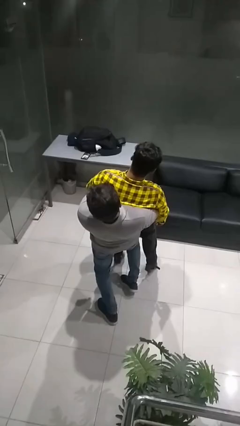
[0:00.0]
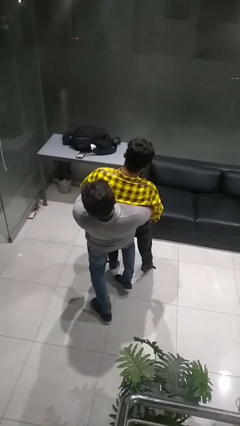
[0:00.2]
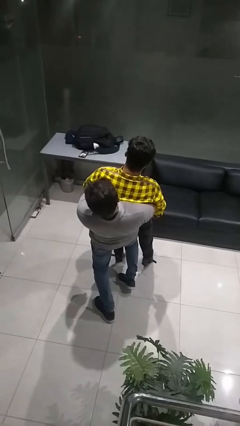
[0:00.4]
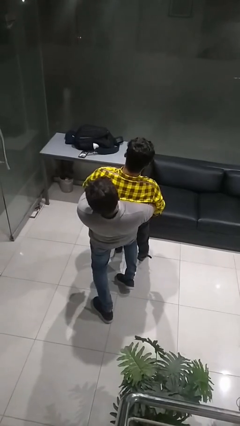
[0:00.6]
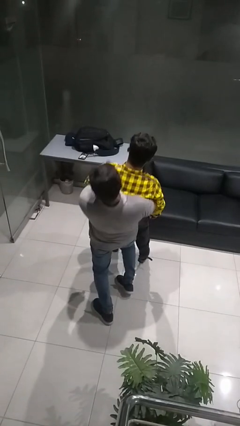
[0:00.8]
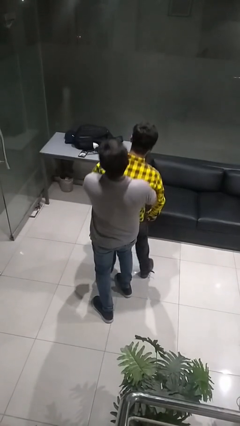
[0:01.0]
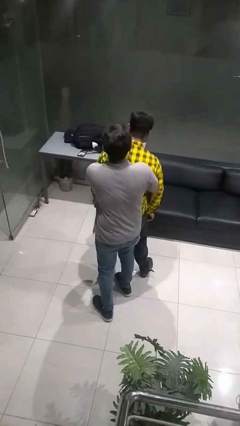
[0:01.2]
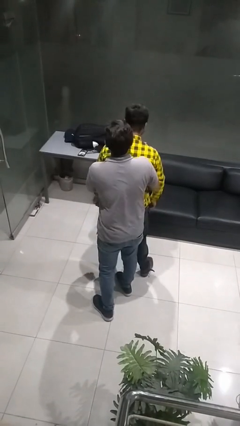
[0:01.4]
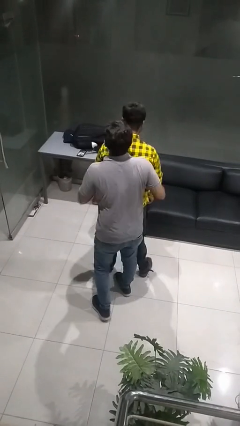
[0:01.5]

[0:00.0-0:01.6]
person puts down person

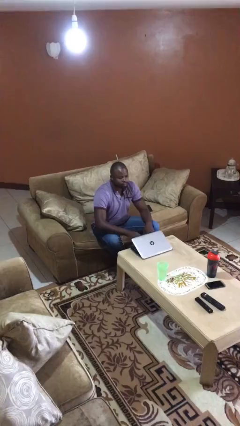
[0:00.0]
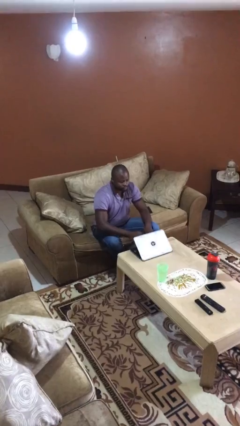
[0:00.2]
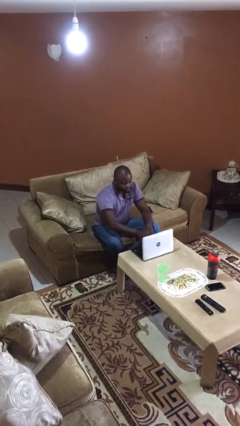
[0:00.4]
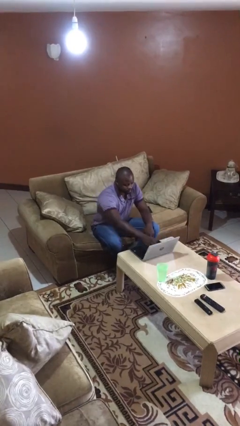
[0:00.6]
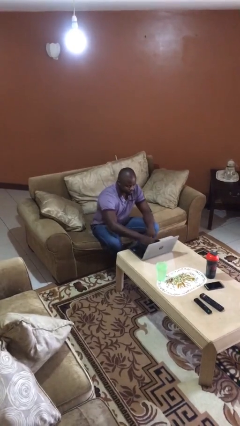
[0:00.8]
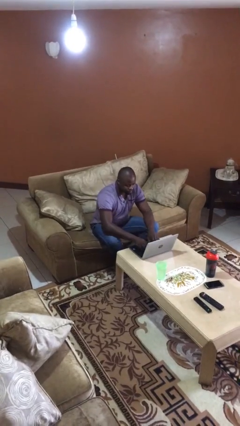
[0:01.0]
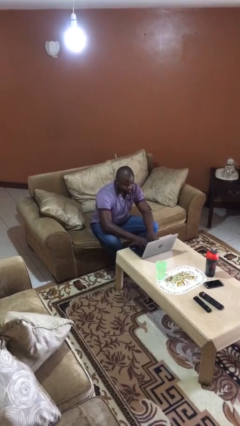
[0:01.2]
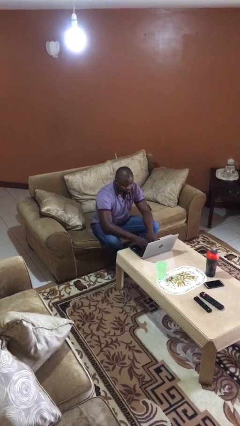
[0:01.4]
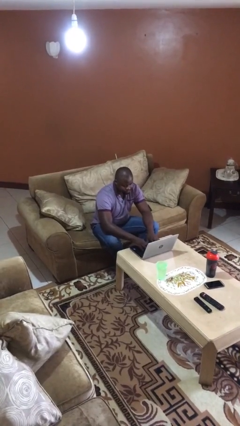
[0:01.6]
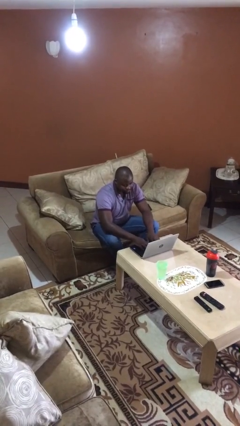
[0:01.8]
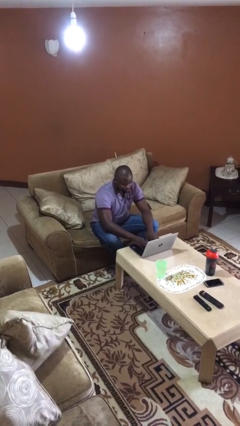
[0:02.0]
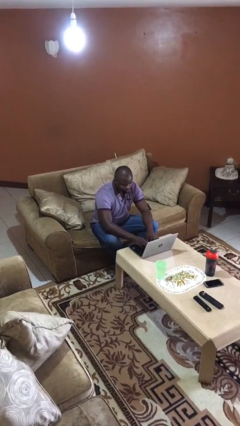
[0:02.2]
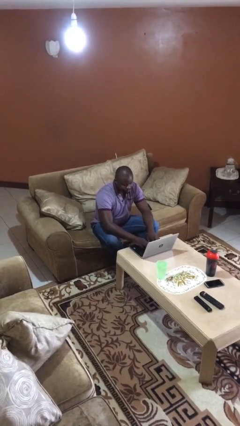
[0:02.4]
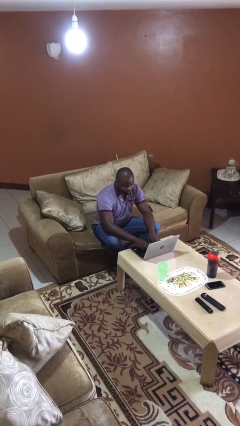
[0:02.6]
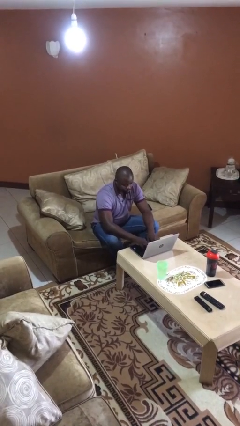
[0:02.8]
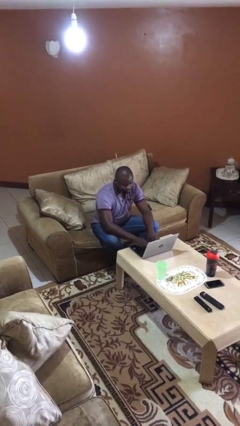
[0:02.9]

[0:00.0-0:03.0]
person interacts with laptop

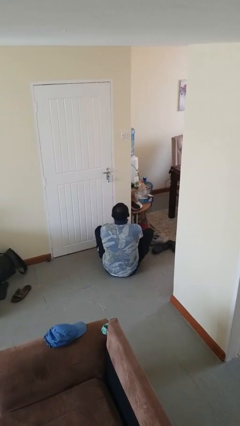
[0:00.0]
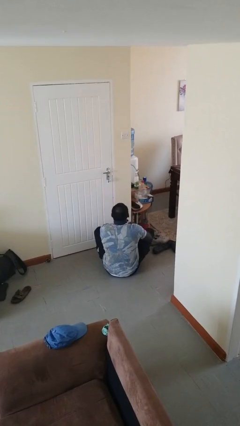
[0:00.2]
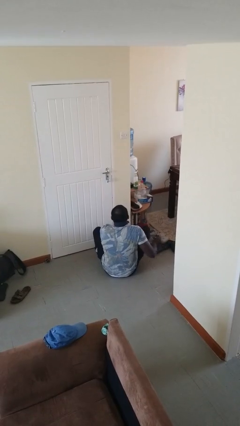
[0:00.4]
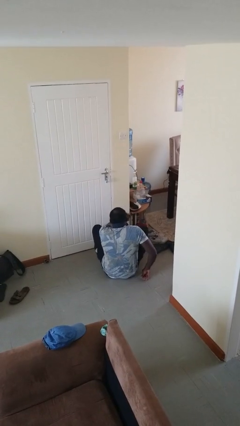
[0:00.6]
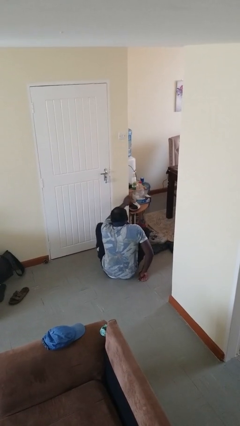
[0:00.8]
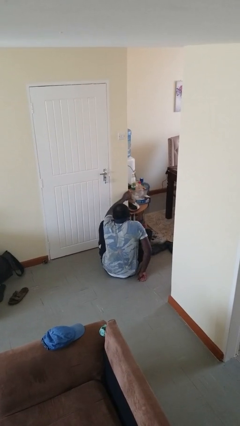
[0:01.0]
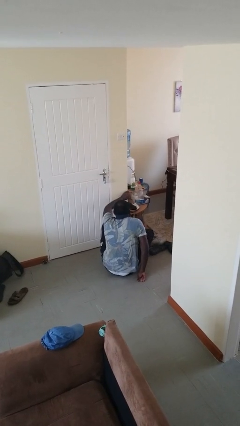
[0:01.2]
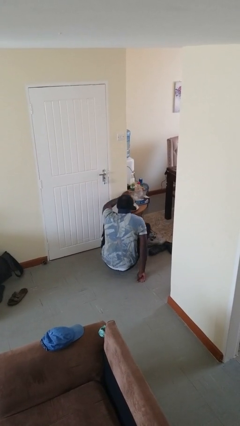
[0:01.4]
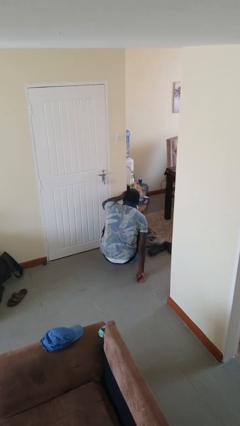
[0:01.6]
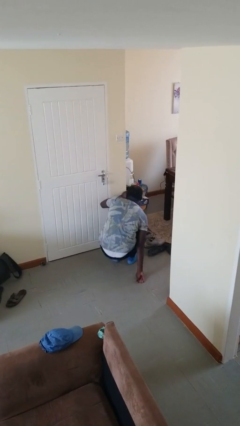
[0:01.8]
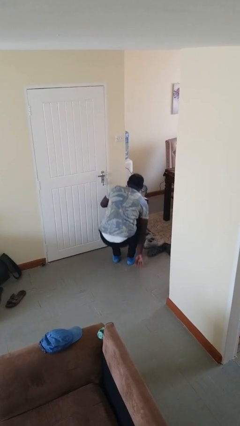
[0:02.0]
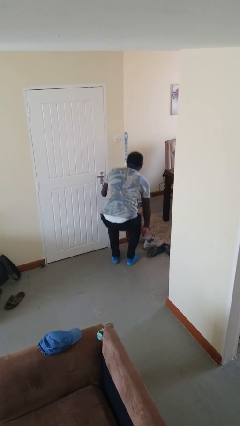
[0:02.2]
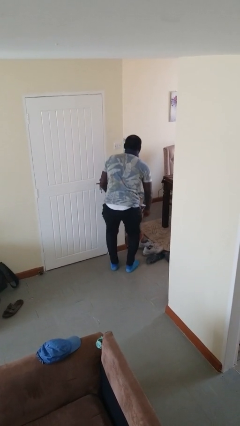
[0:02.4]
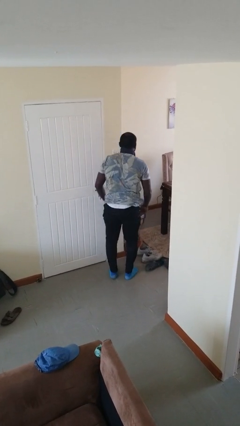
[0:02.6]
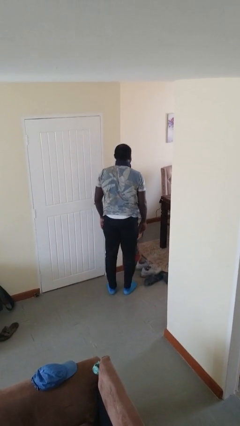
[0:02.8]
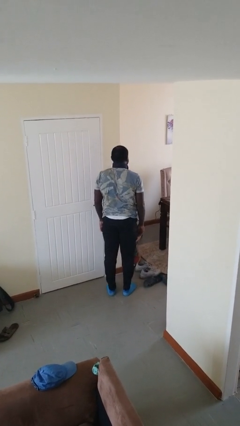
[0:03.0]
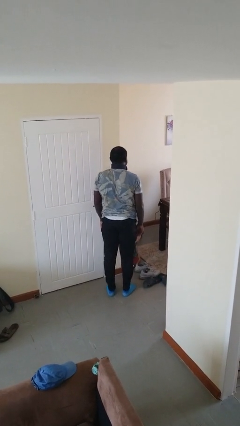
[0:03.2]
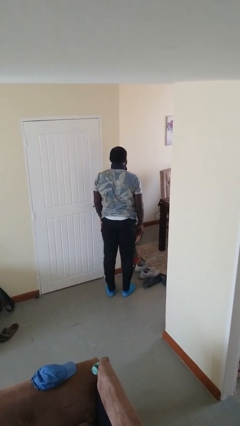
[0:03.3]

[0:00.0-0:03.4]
person stands up from floor

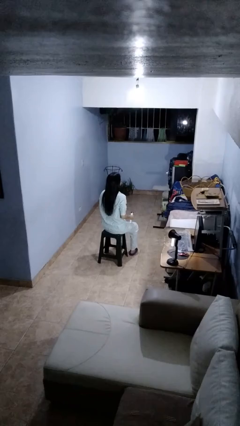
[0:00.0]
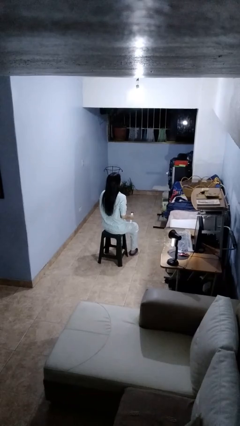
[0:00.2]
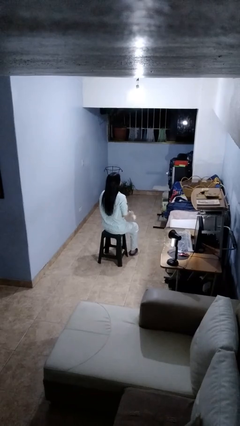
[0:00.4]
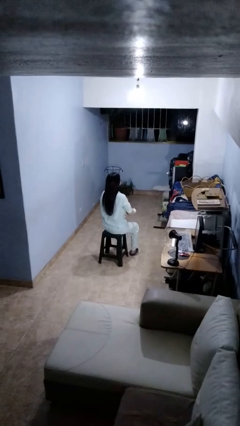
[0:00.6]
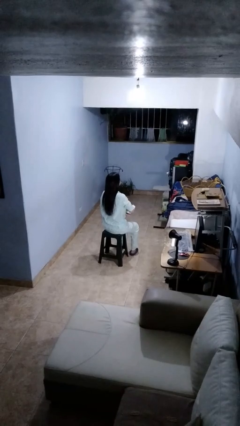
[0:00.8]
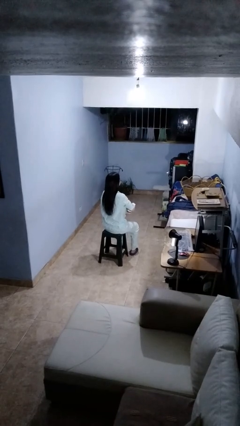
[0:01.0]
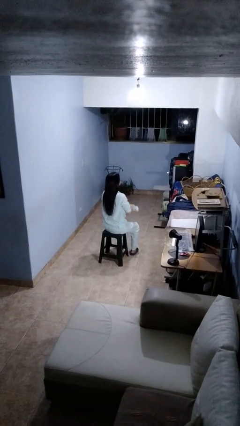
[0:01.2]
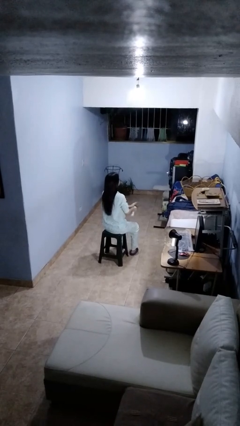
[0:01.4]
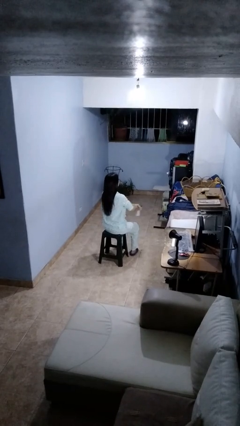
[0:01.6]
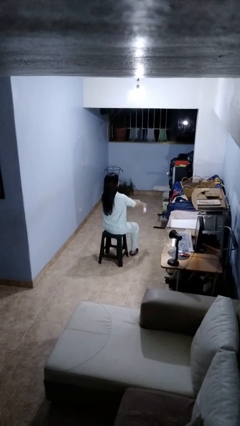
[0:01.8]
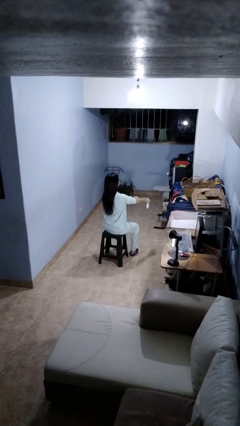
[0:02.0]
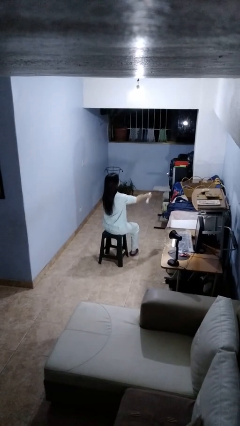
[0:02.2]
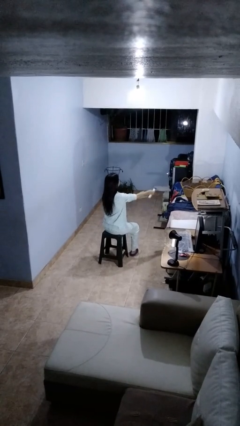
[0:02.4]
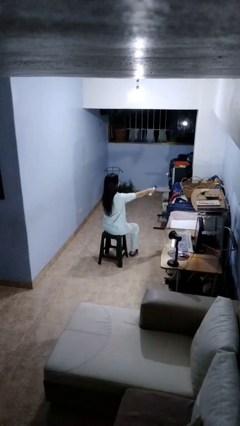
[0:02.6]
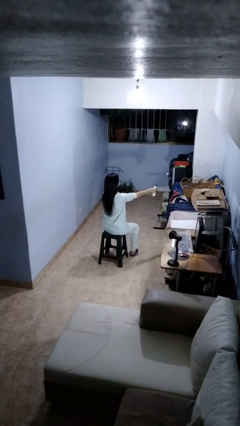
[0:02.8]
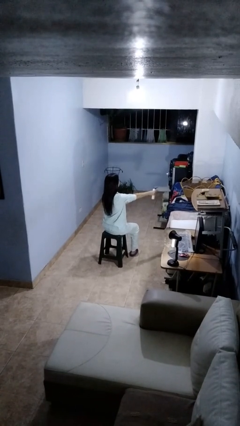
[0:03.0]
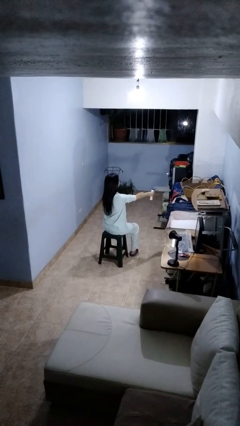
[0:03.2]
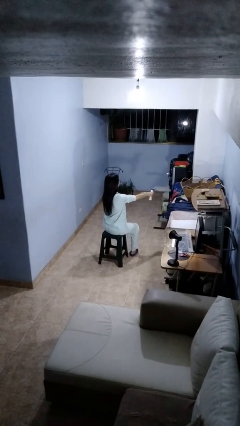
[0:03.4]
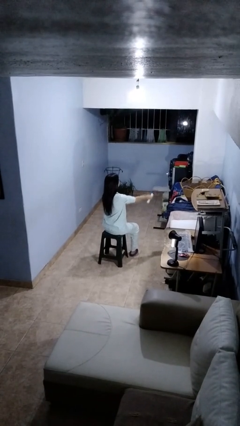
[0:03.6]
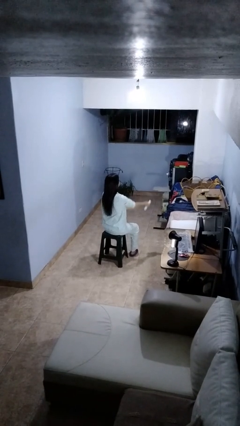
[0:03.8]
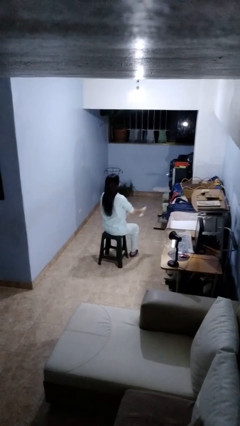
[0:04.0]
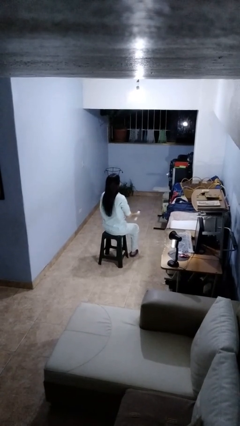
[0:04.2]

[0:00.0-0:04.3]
person applies sunscreen

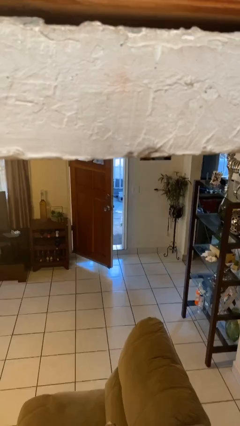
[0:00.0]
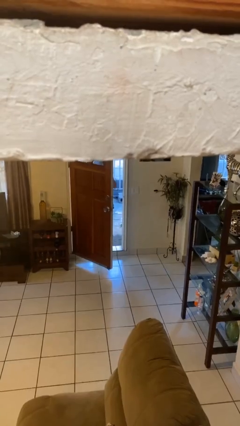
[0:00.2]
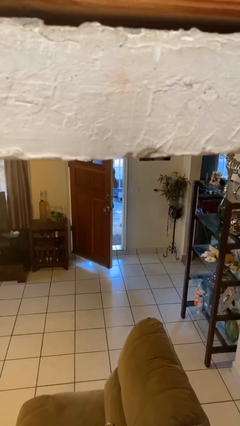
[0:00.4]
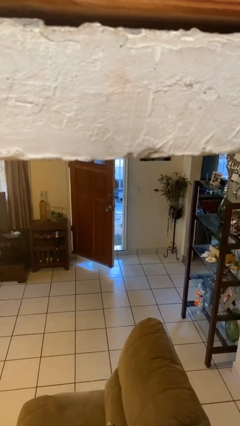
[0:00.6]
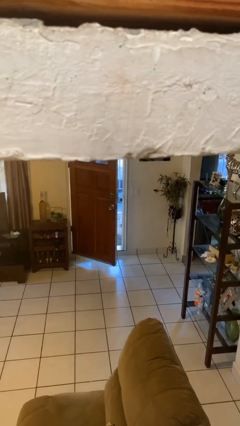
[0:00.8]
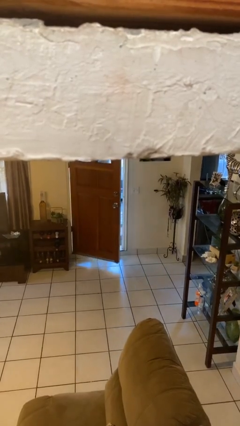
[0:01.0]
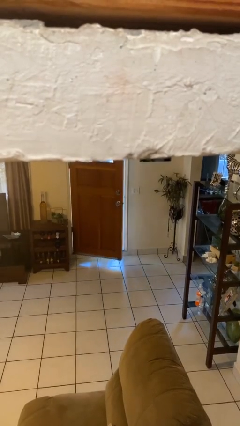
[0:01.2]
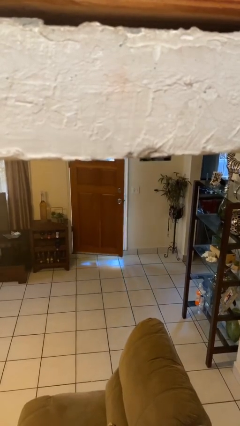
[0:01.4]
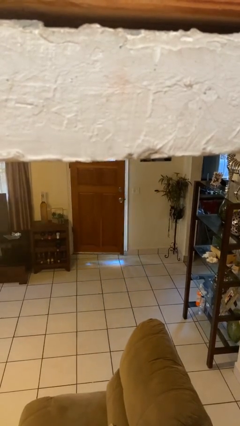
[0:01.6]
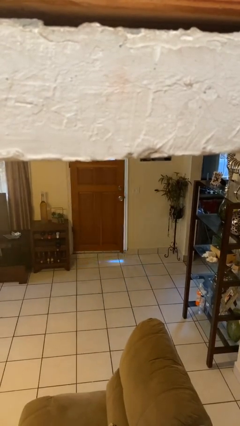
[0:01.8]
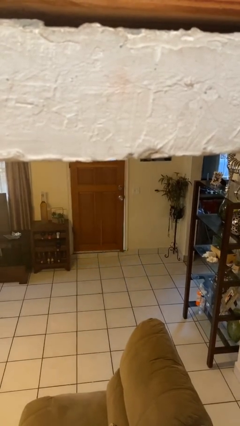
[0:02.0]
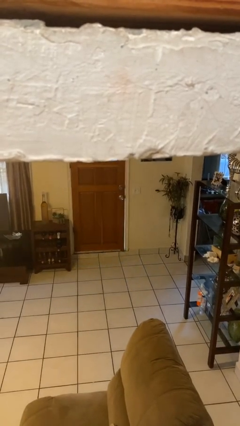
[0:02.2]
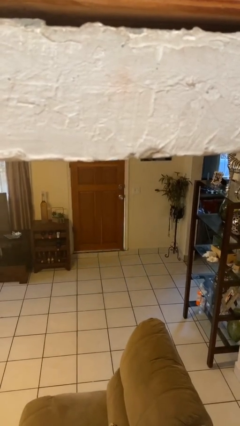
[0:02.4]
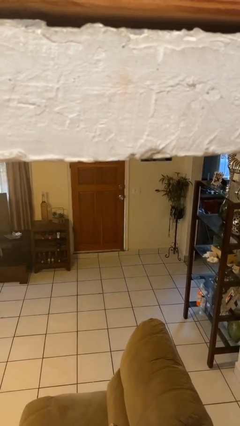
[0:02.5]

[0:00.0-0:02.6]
person closes facility door

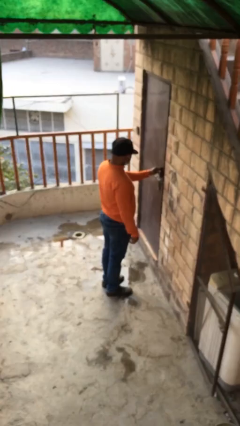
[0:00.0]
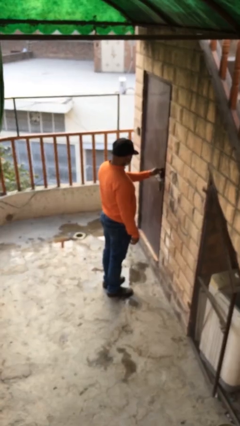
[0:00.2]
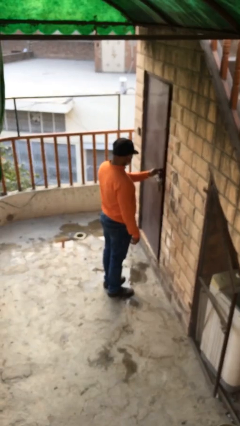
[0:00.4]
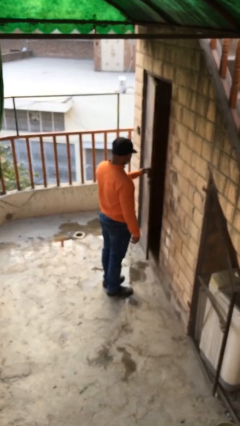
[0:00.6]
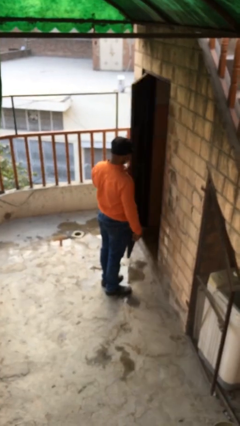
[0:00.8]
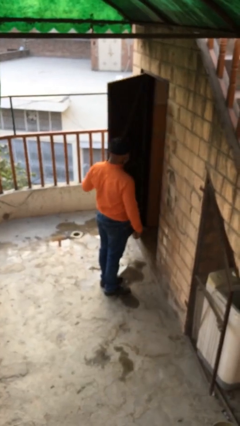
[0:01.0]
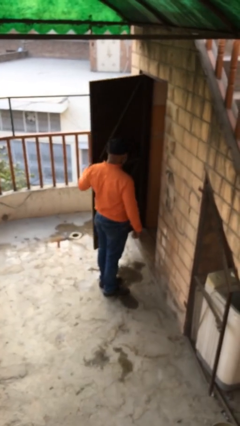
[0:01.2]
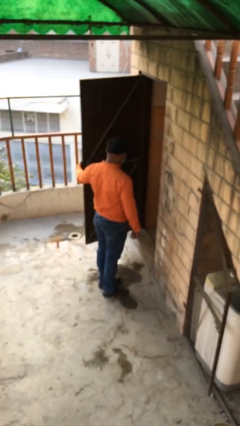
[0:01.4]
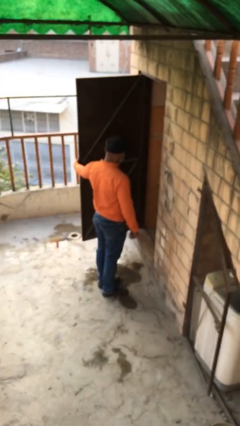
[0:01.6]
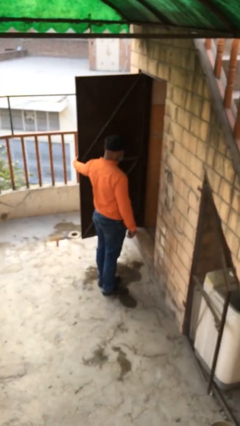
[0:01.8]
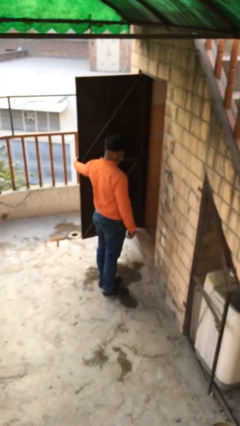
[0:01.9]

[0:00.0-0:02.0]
person opens facility door

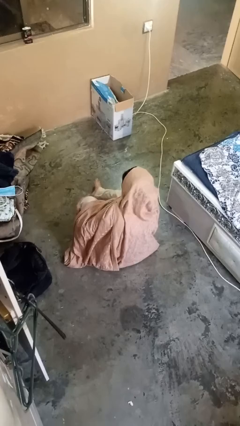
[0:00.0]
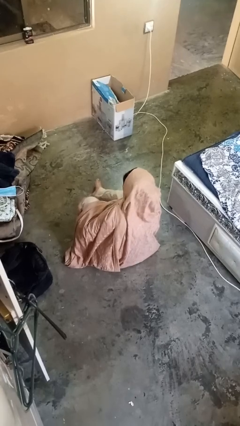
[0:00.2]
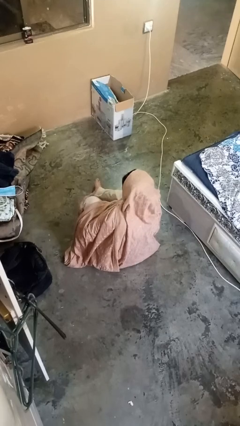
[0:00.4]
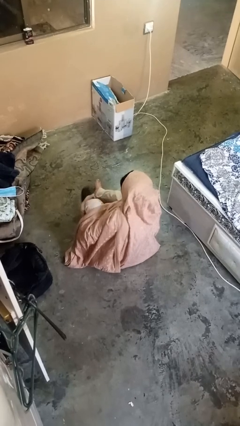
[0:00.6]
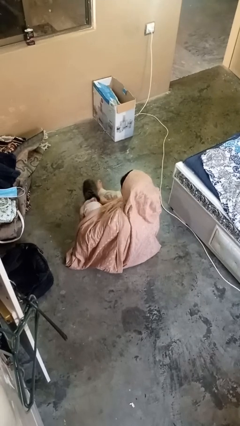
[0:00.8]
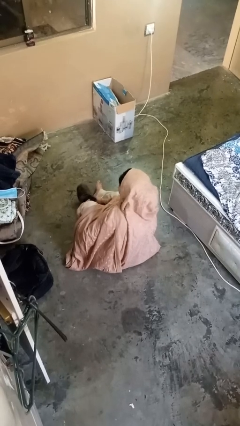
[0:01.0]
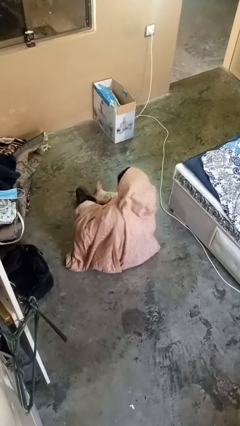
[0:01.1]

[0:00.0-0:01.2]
person takes off shoes
